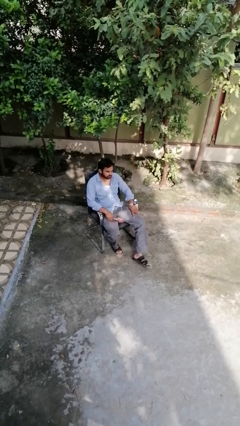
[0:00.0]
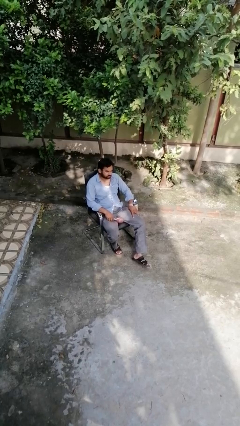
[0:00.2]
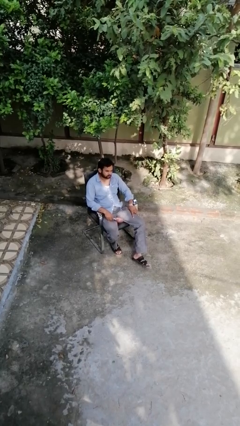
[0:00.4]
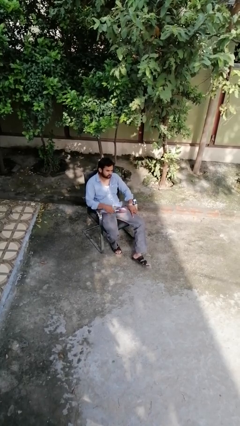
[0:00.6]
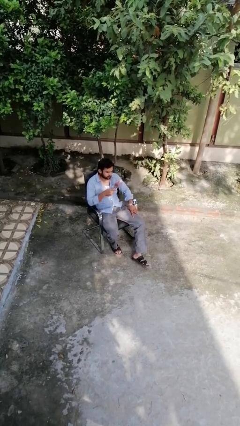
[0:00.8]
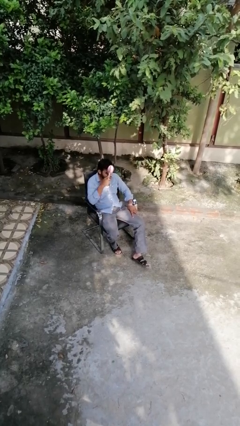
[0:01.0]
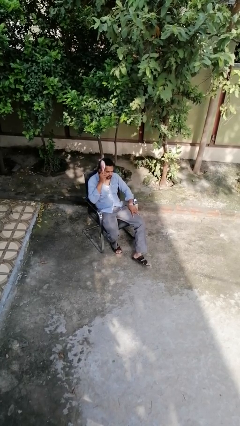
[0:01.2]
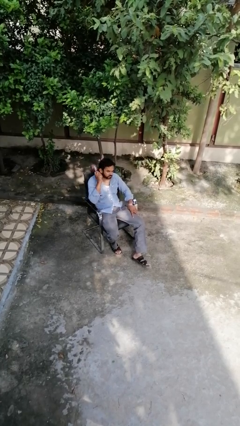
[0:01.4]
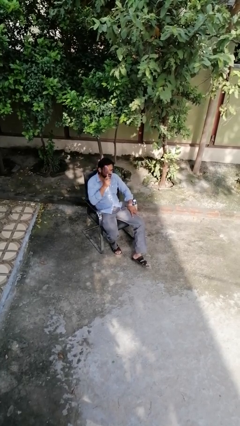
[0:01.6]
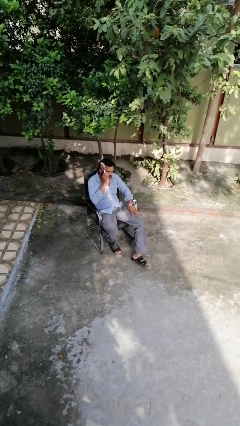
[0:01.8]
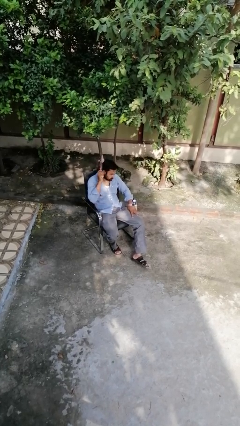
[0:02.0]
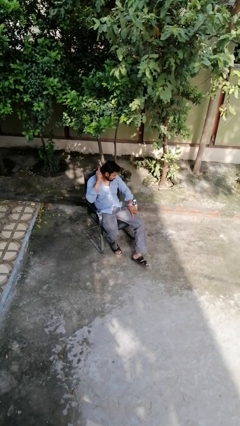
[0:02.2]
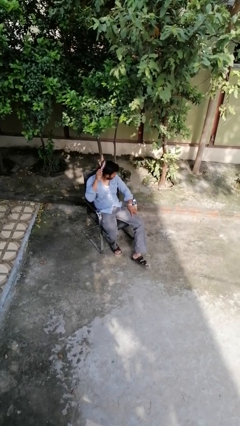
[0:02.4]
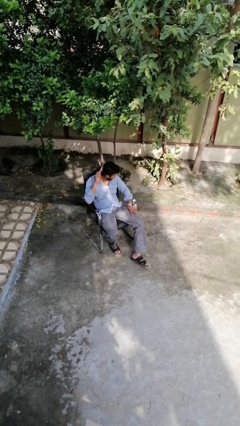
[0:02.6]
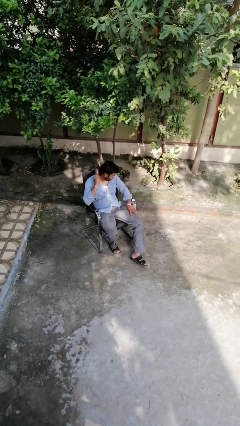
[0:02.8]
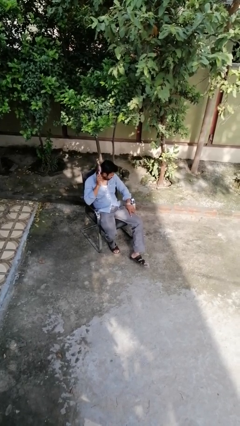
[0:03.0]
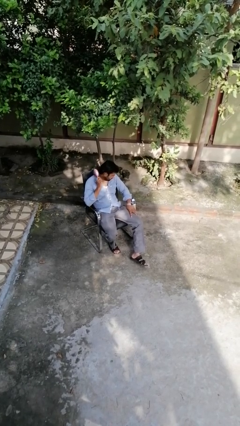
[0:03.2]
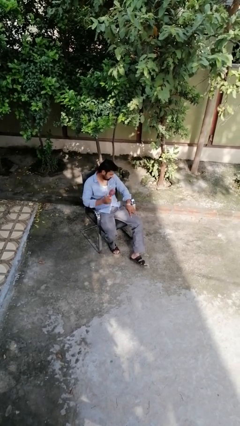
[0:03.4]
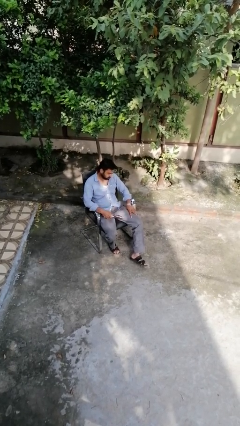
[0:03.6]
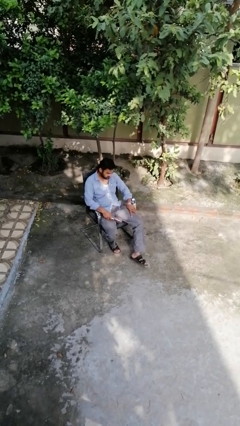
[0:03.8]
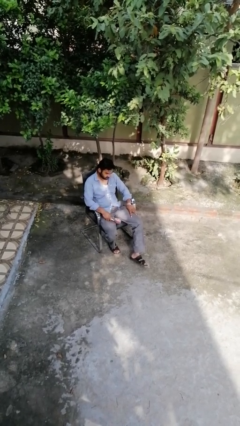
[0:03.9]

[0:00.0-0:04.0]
person brushes hair

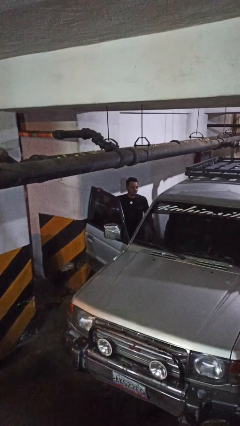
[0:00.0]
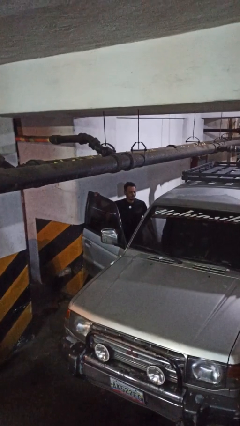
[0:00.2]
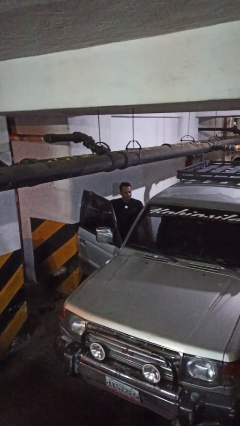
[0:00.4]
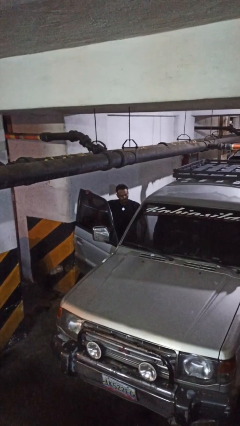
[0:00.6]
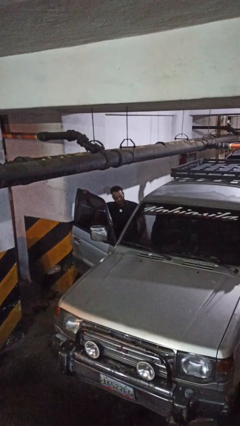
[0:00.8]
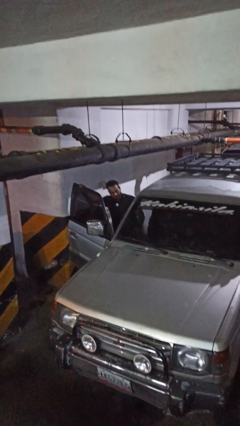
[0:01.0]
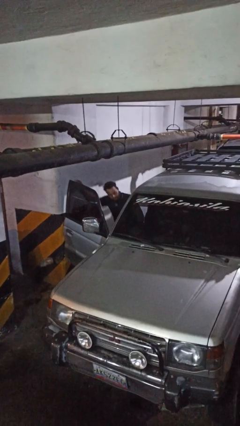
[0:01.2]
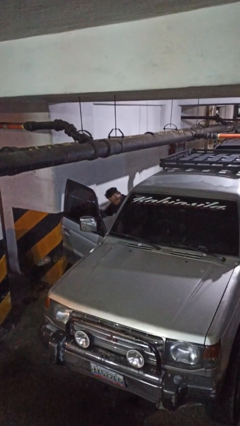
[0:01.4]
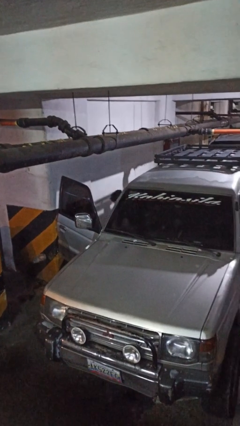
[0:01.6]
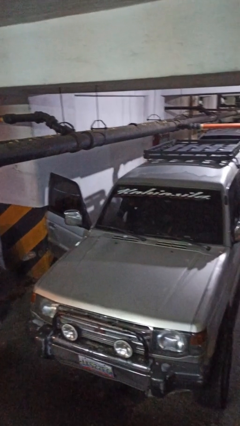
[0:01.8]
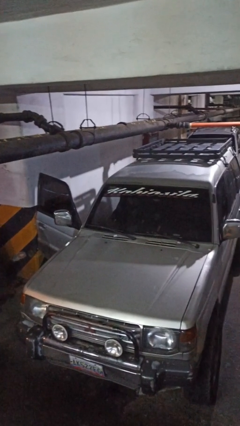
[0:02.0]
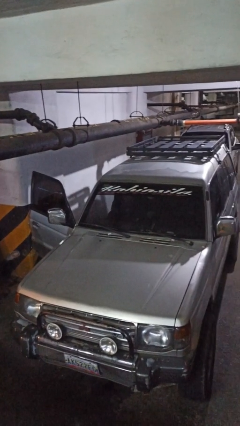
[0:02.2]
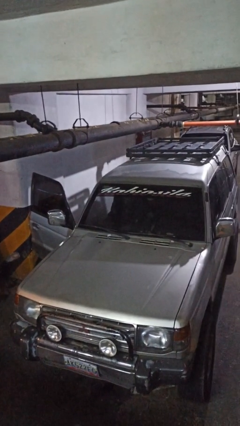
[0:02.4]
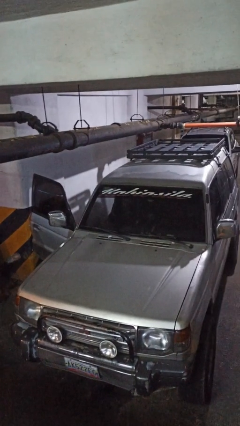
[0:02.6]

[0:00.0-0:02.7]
person enters car

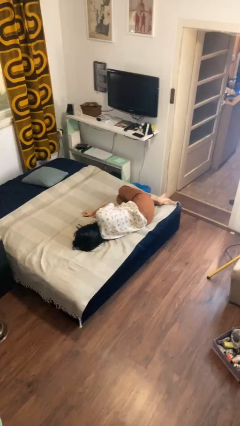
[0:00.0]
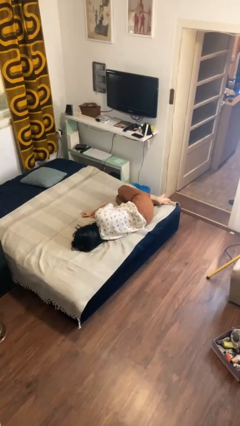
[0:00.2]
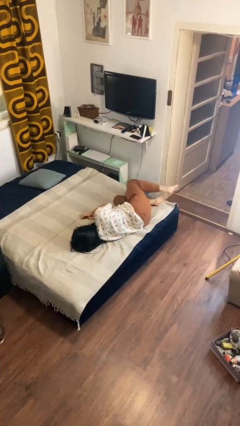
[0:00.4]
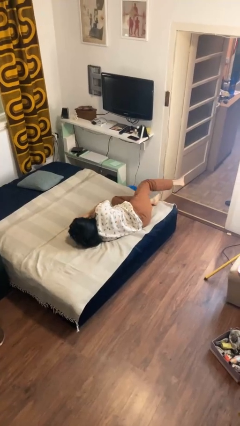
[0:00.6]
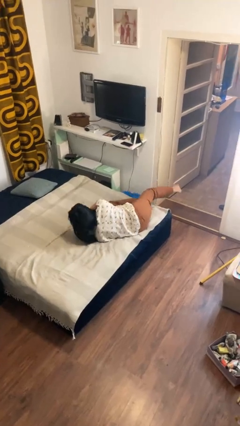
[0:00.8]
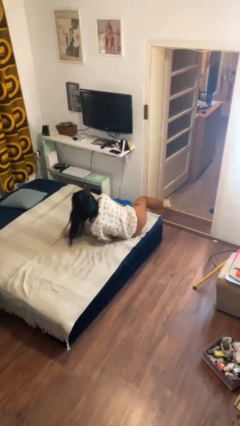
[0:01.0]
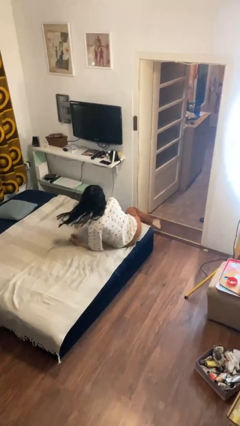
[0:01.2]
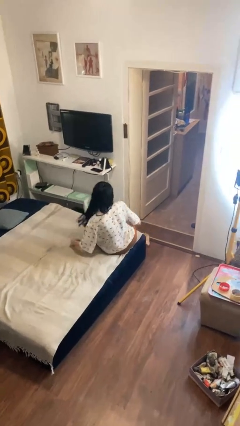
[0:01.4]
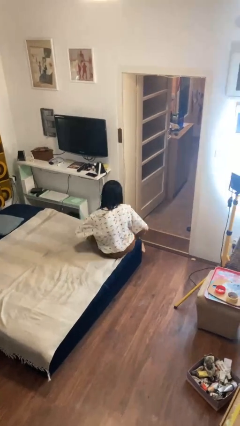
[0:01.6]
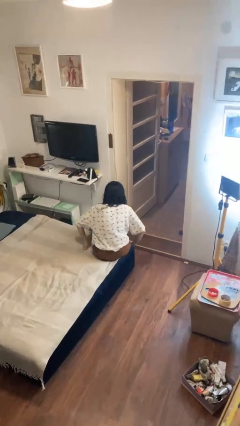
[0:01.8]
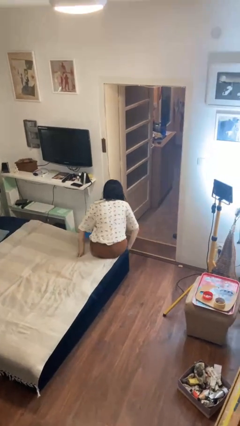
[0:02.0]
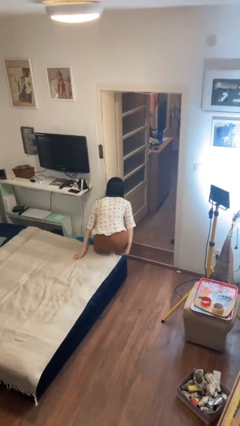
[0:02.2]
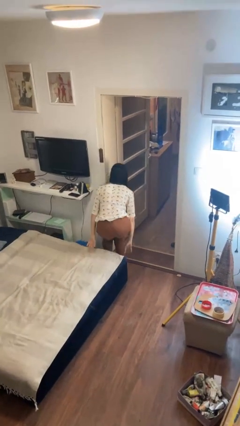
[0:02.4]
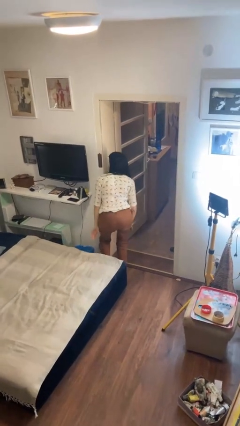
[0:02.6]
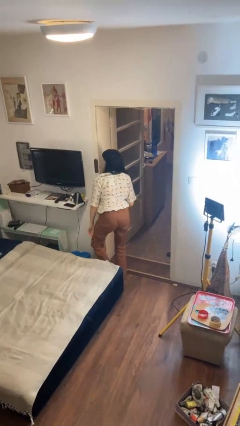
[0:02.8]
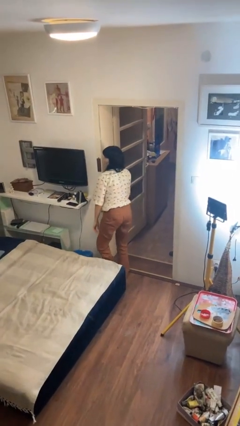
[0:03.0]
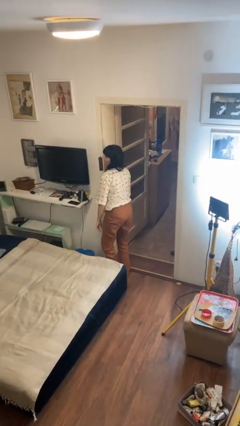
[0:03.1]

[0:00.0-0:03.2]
person stands up

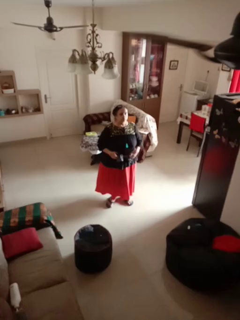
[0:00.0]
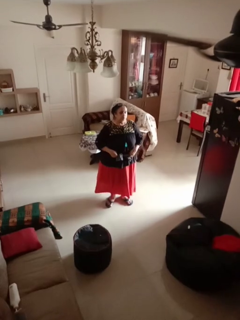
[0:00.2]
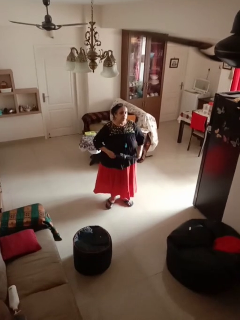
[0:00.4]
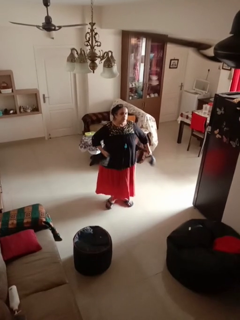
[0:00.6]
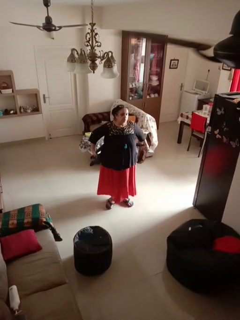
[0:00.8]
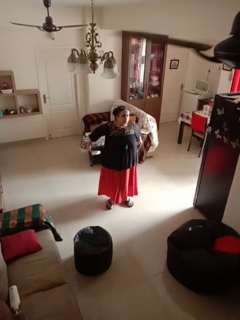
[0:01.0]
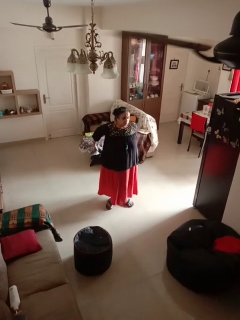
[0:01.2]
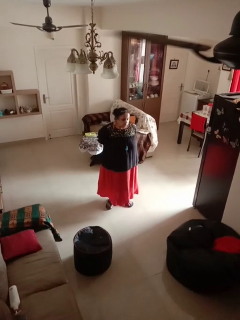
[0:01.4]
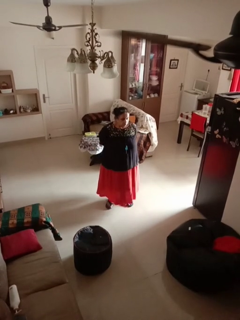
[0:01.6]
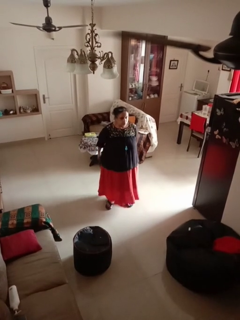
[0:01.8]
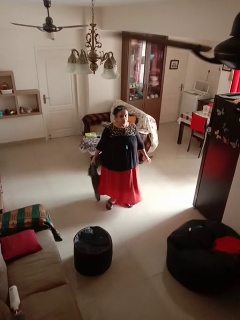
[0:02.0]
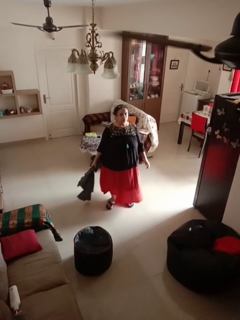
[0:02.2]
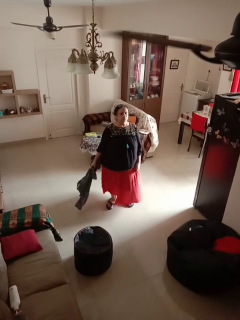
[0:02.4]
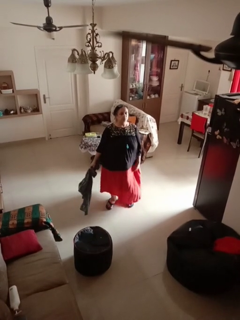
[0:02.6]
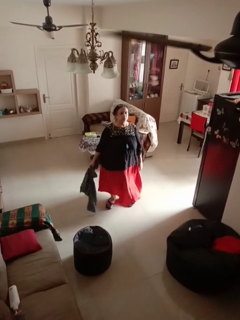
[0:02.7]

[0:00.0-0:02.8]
person unties jacket around waist

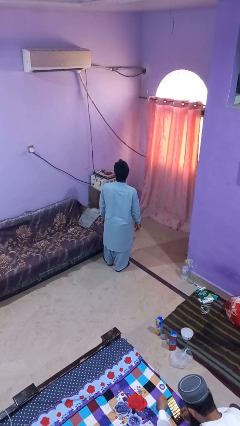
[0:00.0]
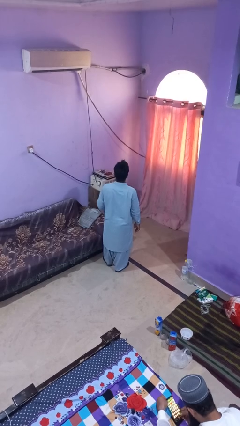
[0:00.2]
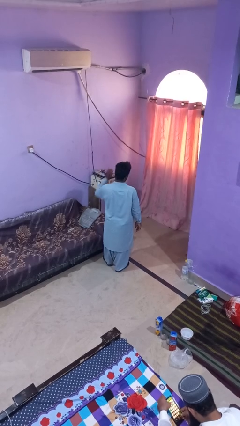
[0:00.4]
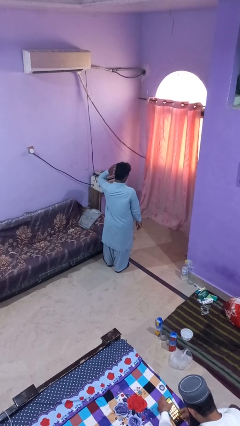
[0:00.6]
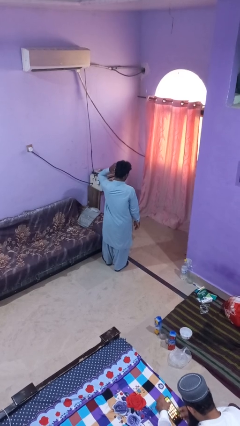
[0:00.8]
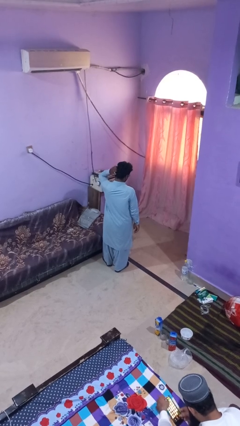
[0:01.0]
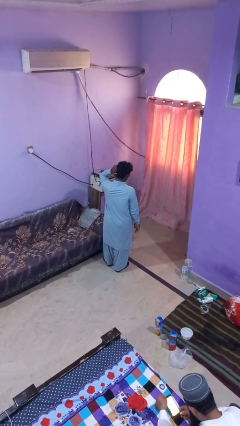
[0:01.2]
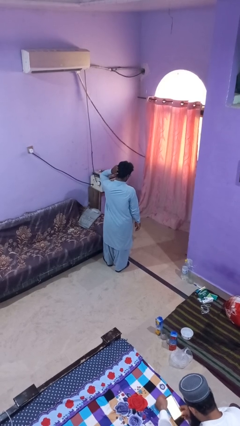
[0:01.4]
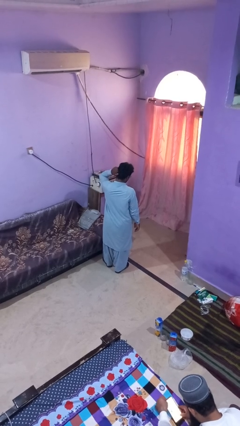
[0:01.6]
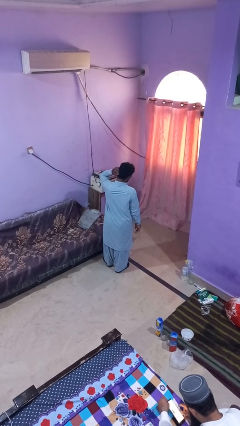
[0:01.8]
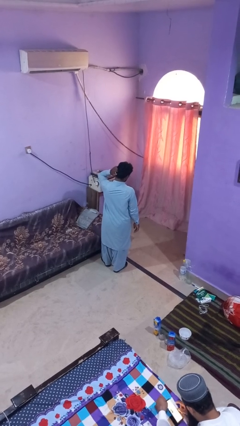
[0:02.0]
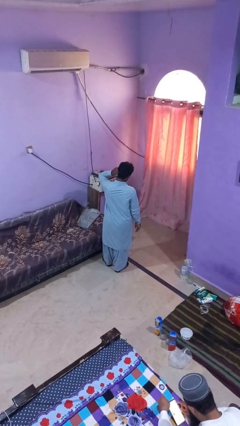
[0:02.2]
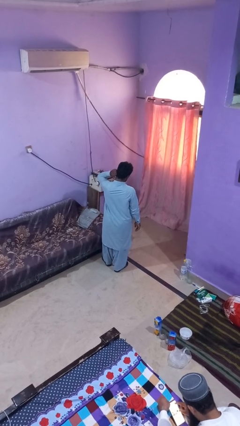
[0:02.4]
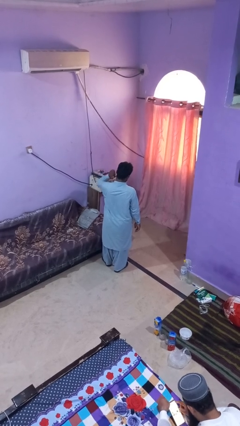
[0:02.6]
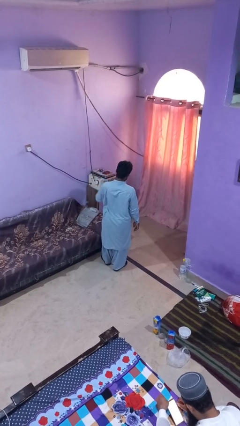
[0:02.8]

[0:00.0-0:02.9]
person scratches face

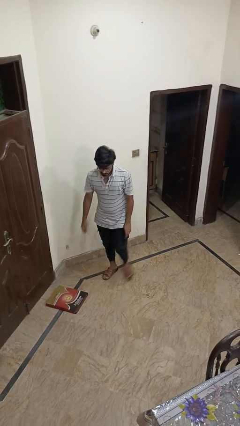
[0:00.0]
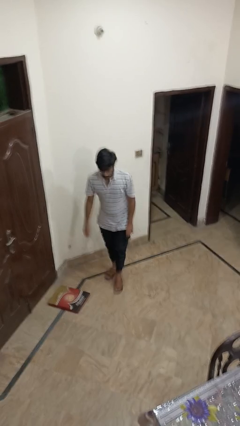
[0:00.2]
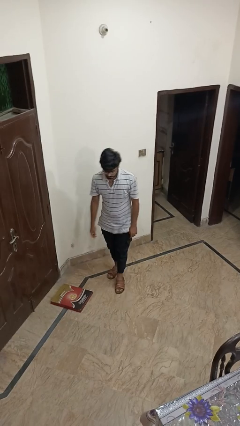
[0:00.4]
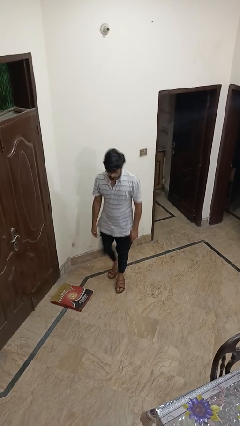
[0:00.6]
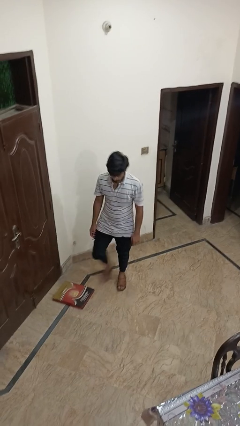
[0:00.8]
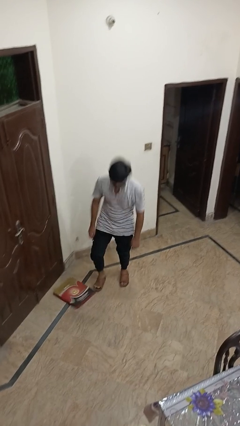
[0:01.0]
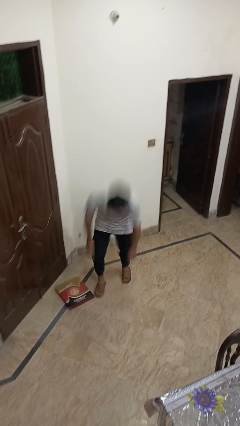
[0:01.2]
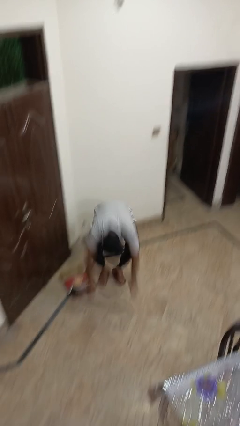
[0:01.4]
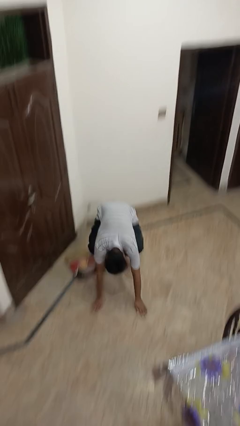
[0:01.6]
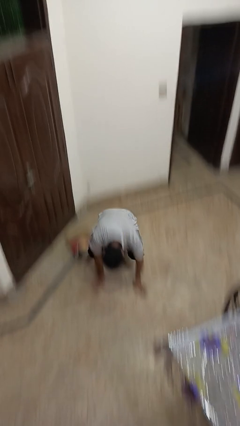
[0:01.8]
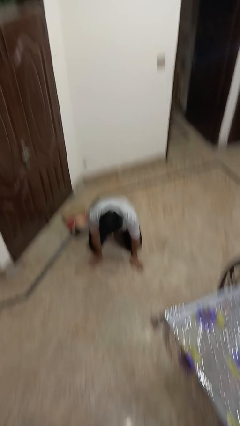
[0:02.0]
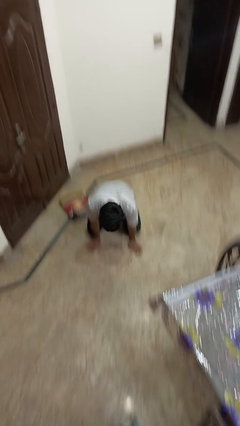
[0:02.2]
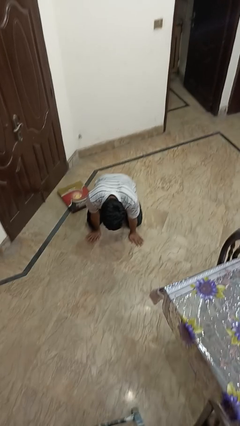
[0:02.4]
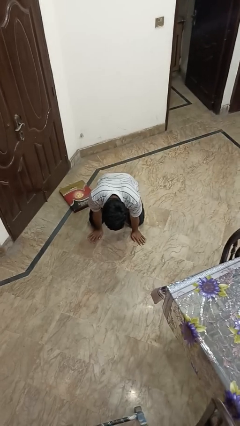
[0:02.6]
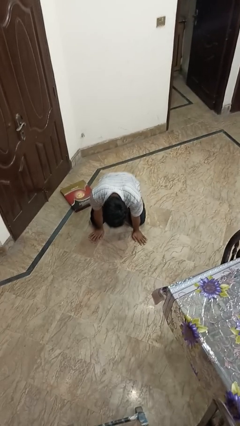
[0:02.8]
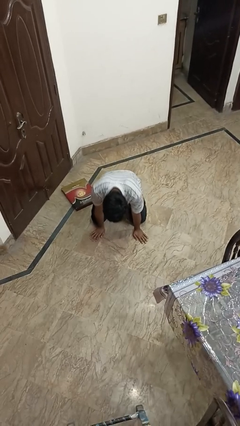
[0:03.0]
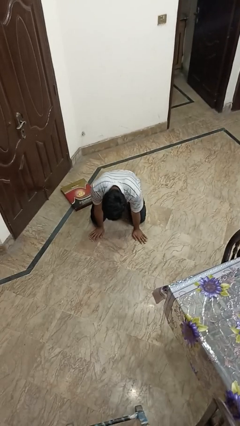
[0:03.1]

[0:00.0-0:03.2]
person trips on object on floor
